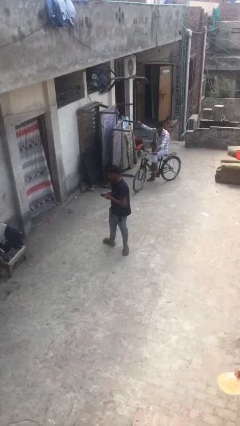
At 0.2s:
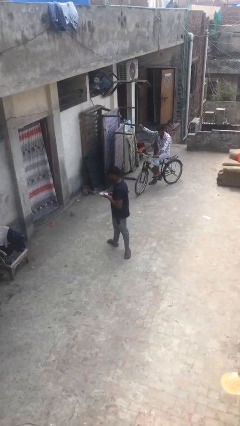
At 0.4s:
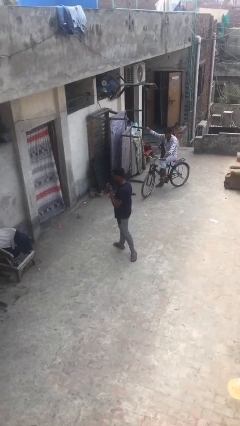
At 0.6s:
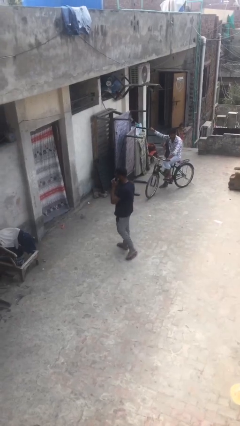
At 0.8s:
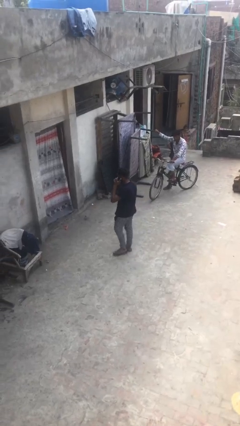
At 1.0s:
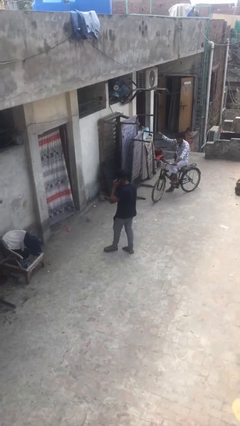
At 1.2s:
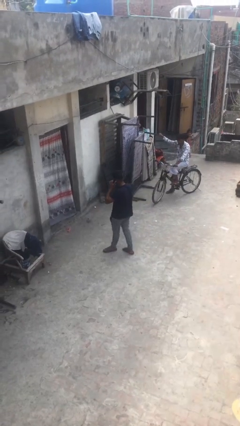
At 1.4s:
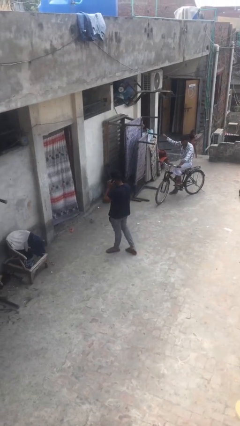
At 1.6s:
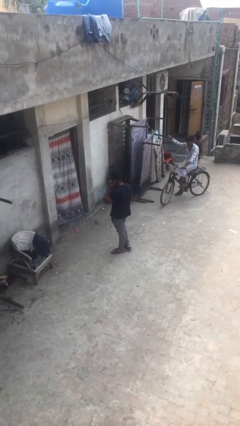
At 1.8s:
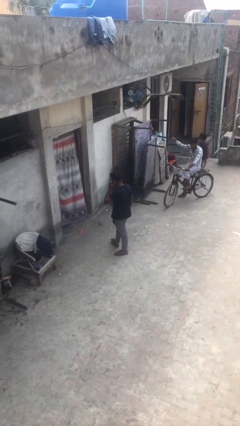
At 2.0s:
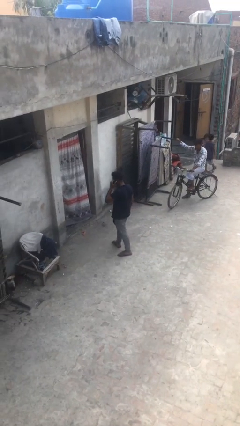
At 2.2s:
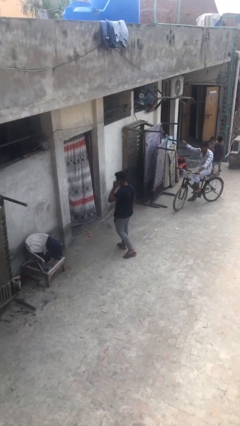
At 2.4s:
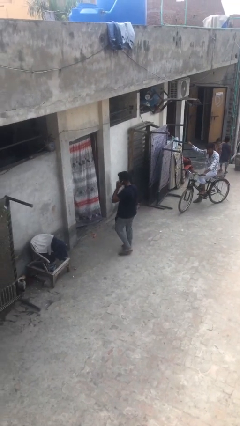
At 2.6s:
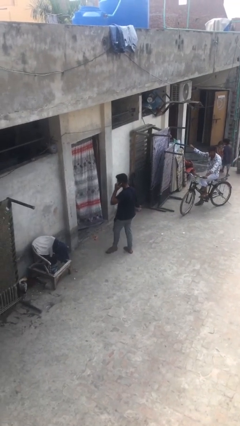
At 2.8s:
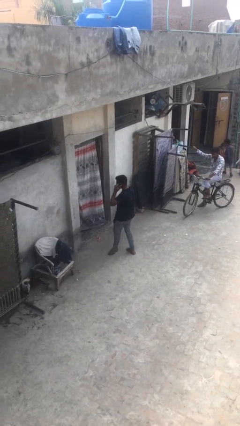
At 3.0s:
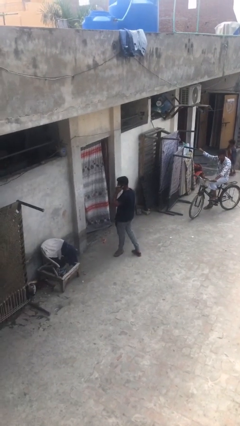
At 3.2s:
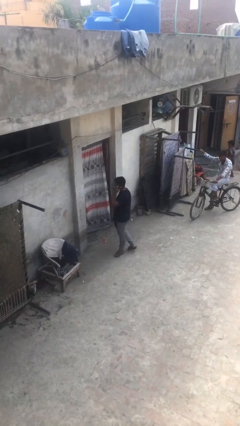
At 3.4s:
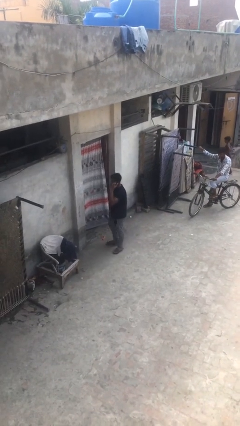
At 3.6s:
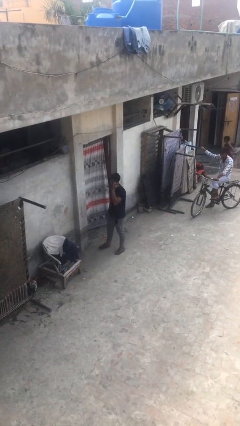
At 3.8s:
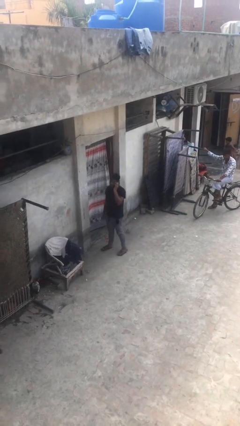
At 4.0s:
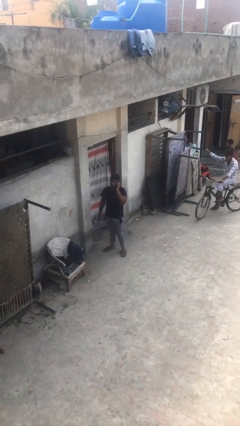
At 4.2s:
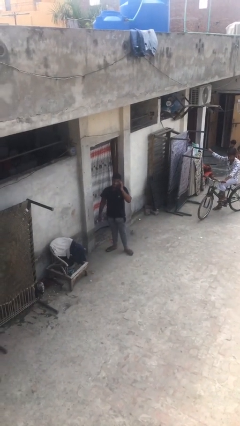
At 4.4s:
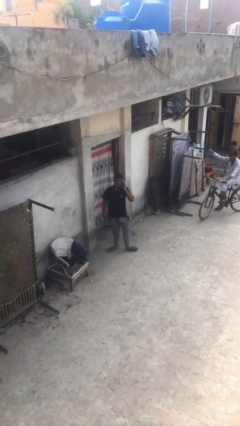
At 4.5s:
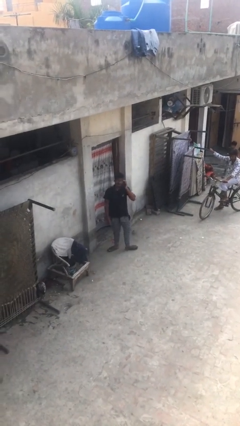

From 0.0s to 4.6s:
person talks on phone

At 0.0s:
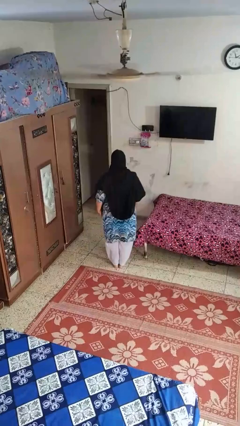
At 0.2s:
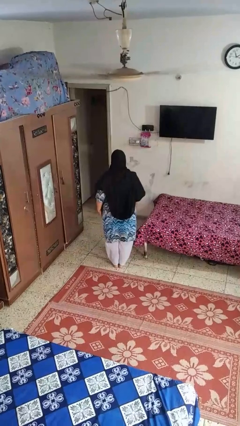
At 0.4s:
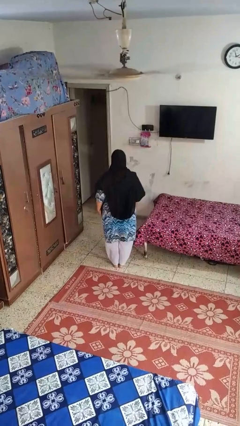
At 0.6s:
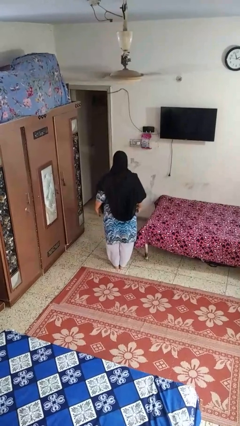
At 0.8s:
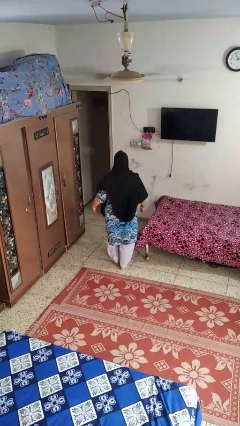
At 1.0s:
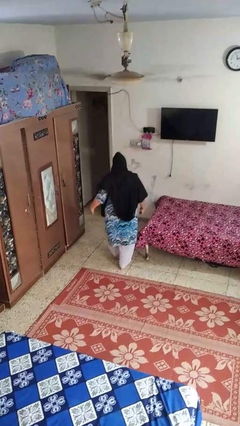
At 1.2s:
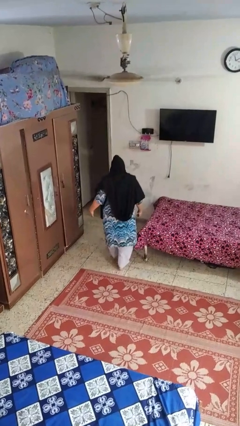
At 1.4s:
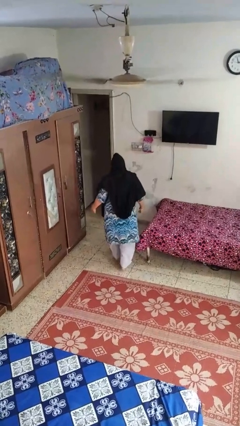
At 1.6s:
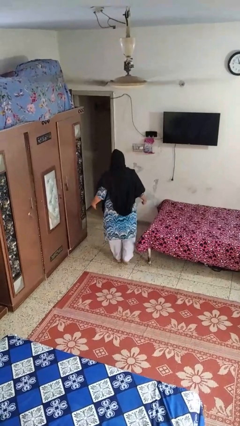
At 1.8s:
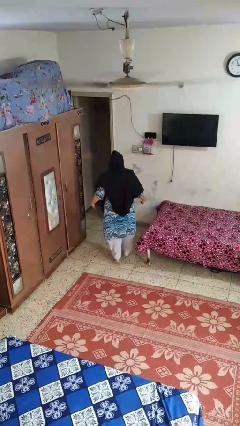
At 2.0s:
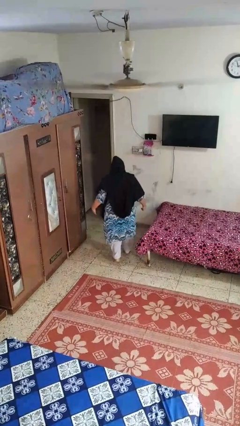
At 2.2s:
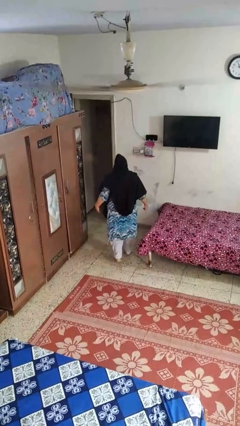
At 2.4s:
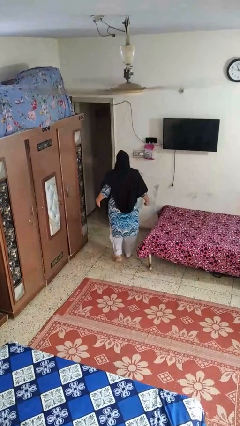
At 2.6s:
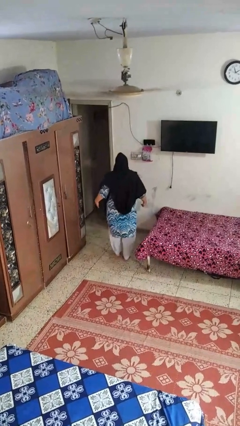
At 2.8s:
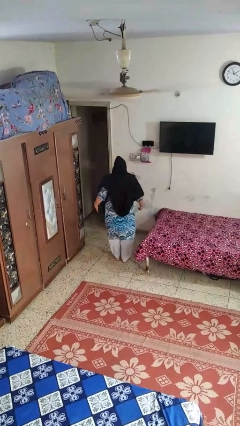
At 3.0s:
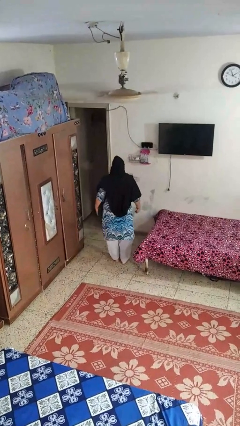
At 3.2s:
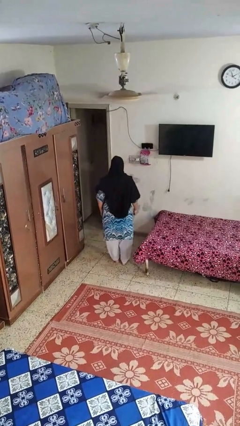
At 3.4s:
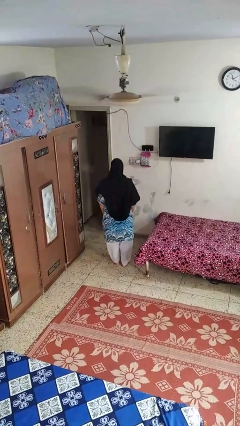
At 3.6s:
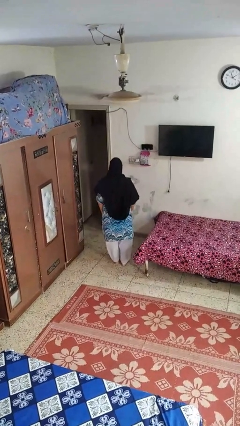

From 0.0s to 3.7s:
person walks tiptoe

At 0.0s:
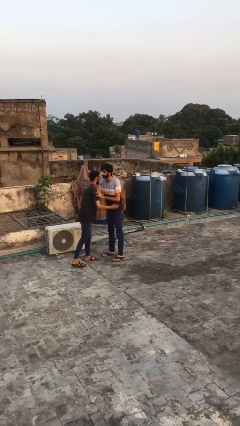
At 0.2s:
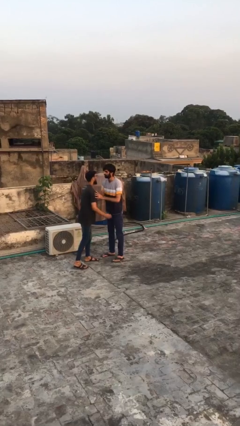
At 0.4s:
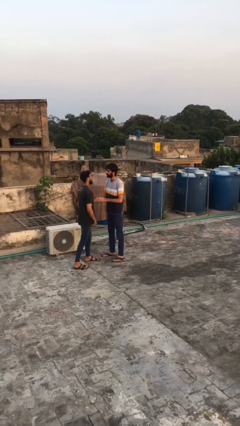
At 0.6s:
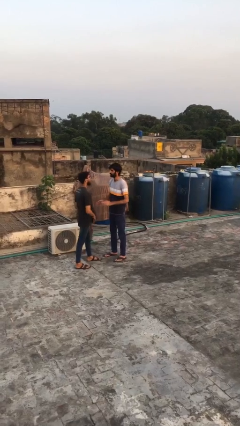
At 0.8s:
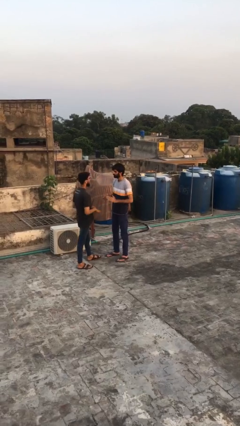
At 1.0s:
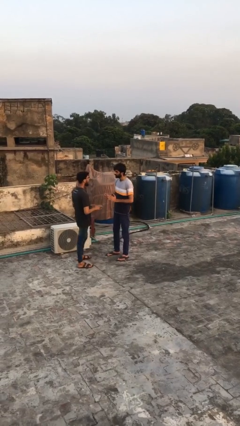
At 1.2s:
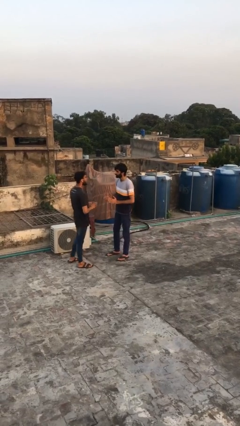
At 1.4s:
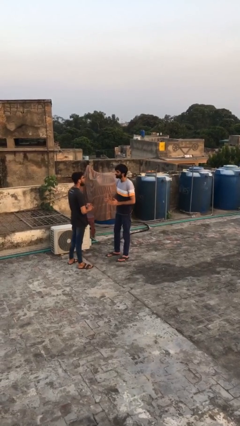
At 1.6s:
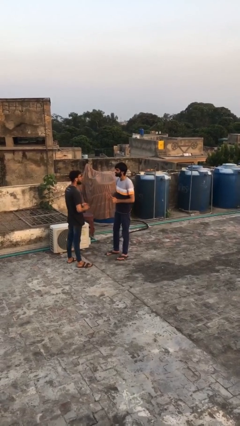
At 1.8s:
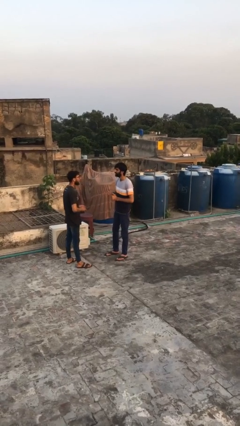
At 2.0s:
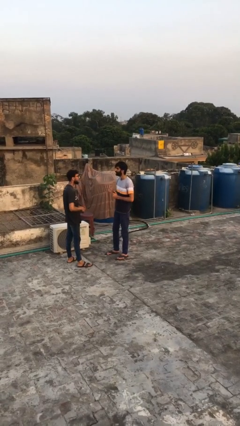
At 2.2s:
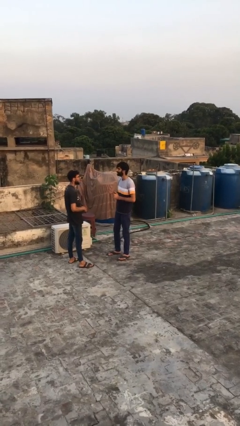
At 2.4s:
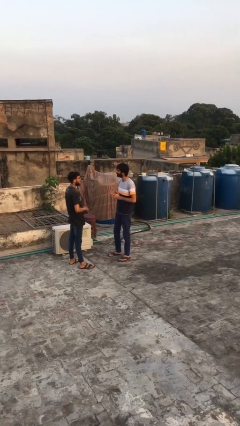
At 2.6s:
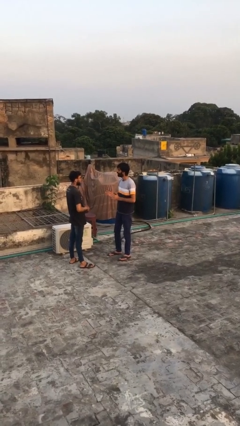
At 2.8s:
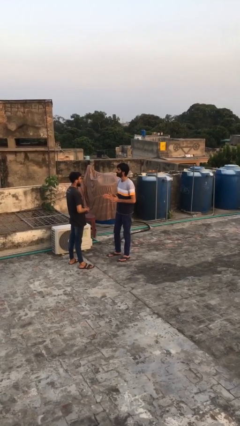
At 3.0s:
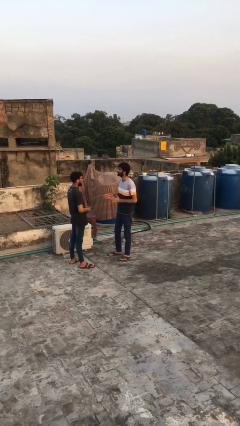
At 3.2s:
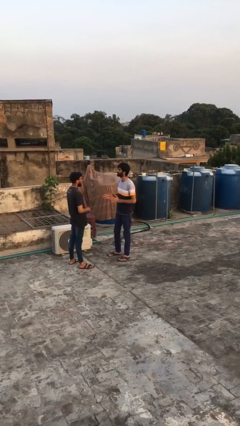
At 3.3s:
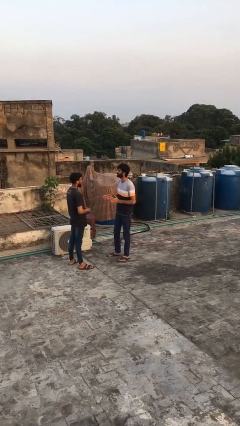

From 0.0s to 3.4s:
person talks to person

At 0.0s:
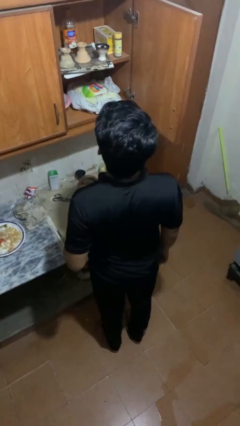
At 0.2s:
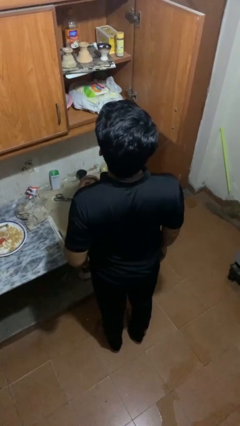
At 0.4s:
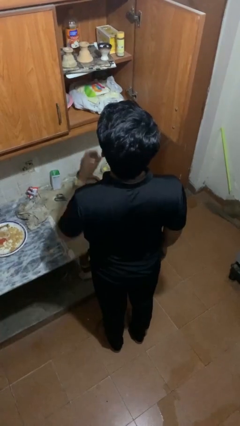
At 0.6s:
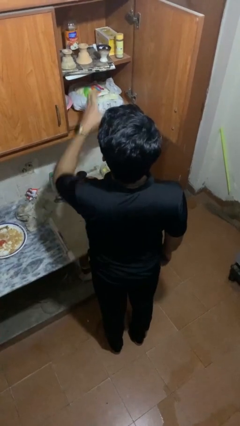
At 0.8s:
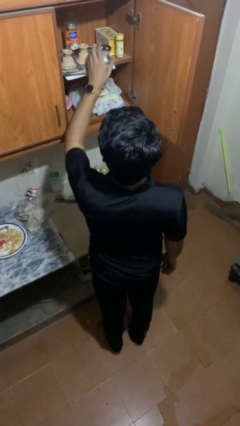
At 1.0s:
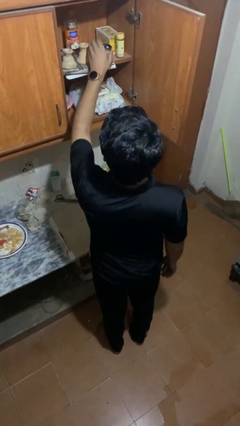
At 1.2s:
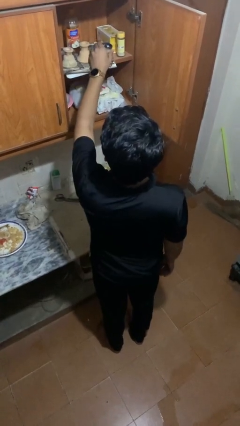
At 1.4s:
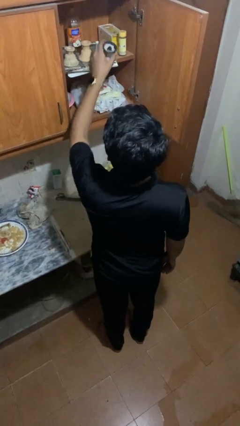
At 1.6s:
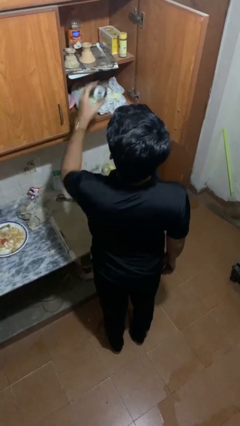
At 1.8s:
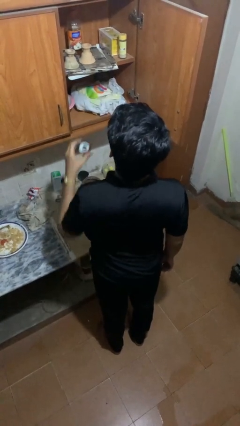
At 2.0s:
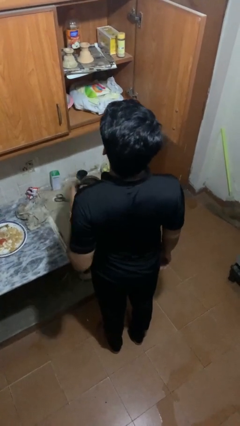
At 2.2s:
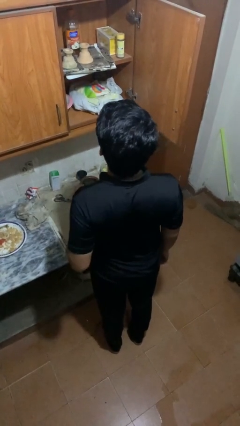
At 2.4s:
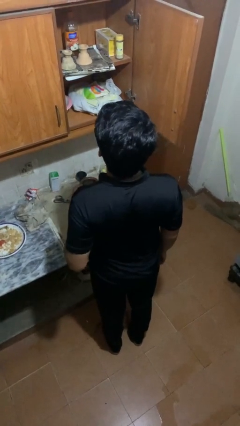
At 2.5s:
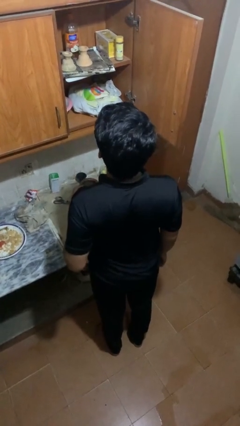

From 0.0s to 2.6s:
person takes object from cabinet

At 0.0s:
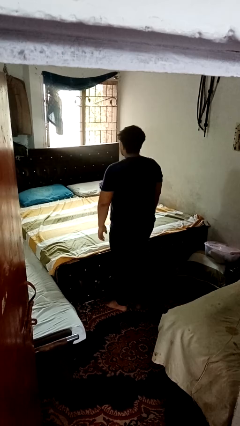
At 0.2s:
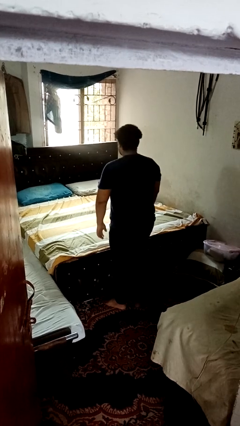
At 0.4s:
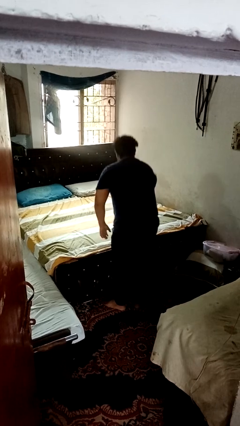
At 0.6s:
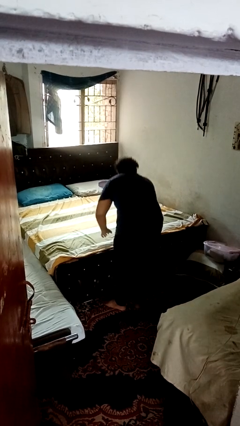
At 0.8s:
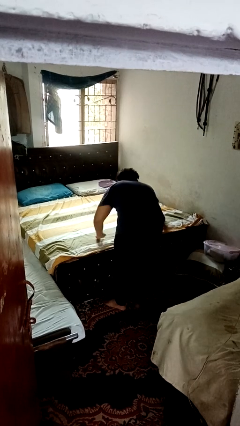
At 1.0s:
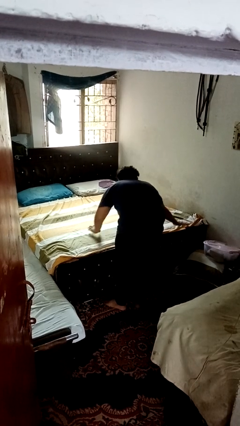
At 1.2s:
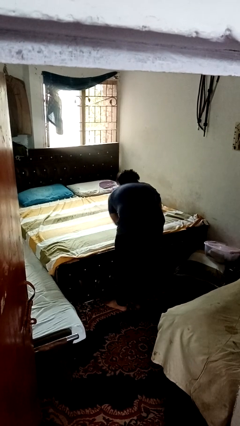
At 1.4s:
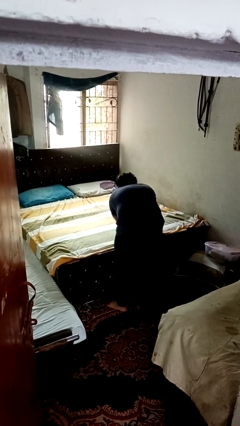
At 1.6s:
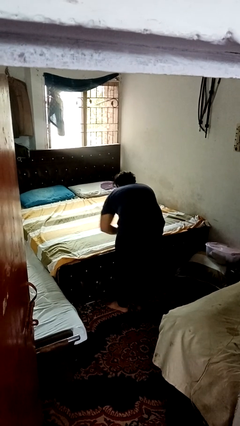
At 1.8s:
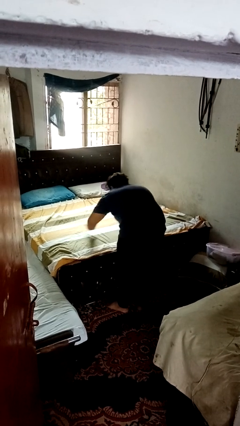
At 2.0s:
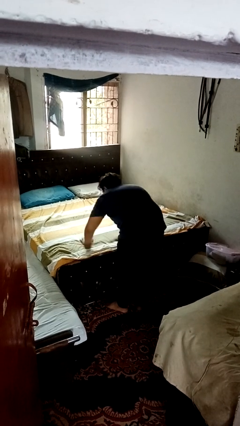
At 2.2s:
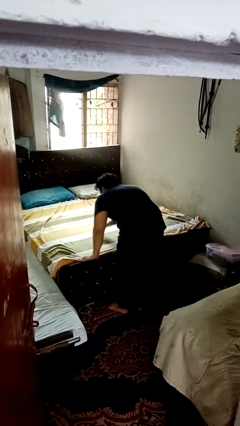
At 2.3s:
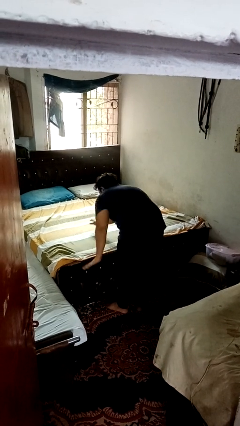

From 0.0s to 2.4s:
person makes bed

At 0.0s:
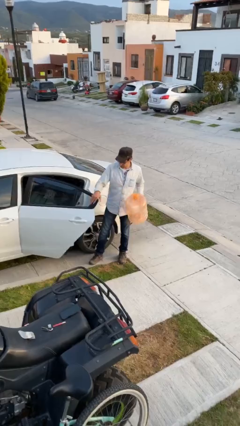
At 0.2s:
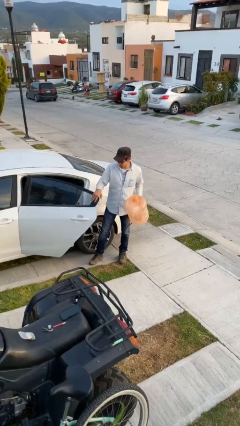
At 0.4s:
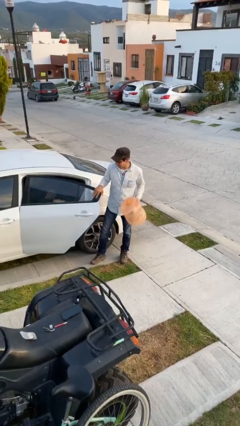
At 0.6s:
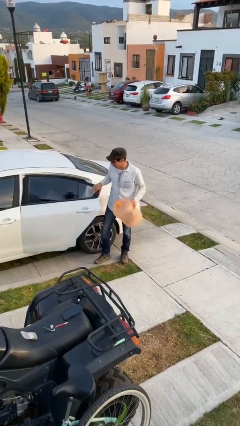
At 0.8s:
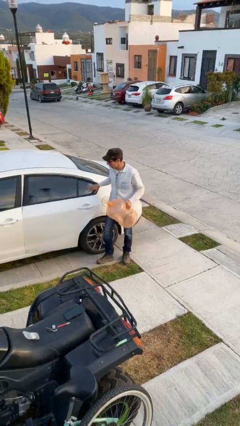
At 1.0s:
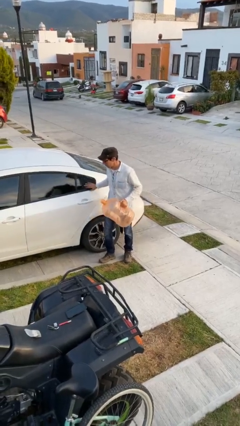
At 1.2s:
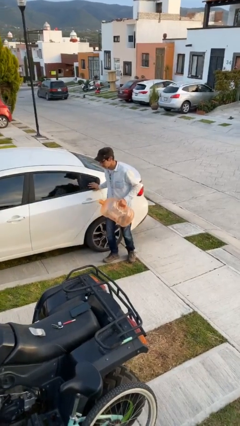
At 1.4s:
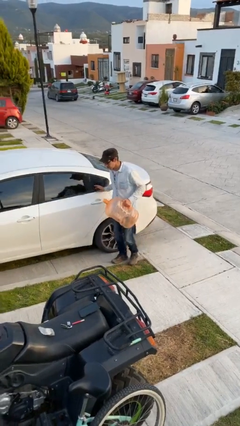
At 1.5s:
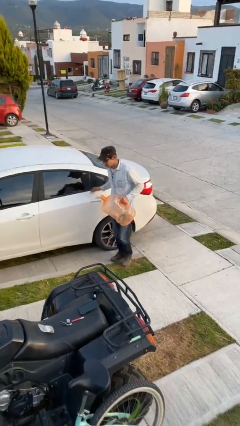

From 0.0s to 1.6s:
person closes car door
